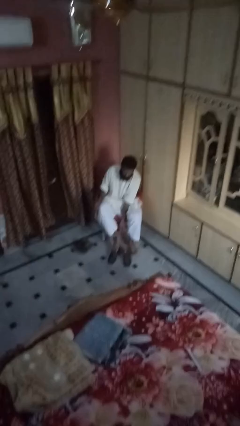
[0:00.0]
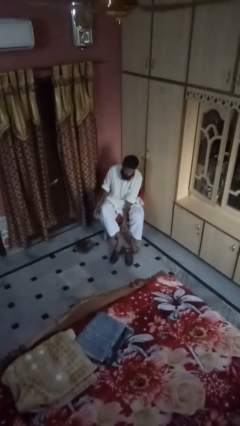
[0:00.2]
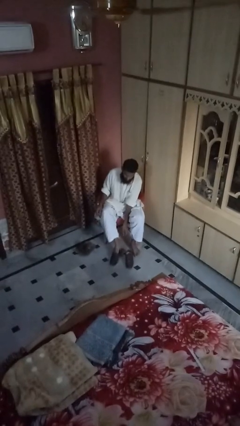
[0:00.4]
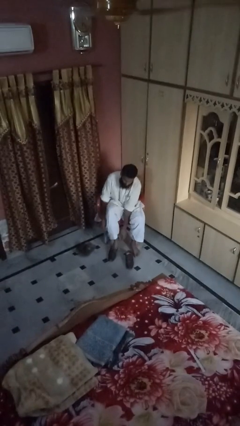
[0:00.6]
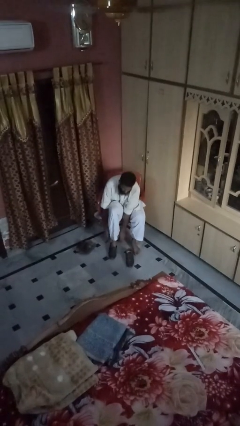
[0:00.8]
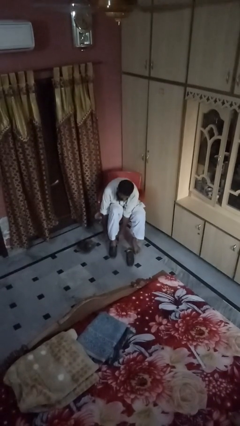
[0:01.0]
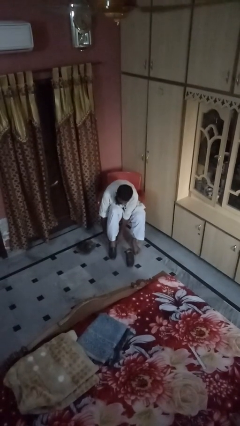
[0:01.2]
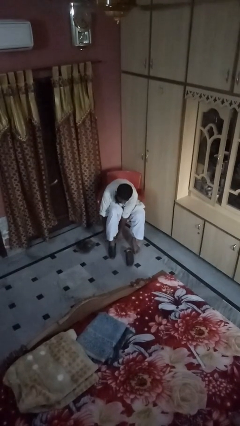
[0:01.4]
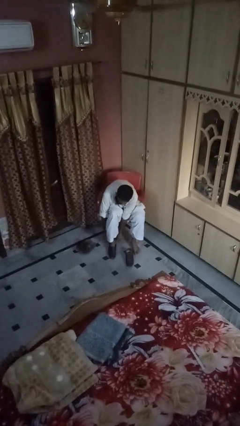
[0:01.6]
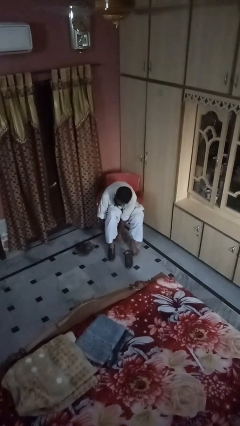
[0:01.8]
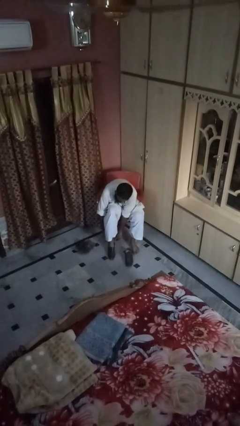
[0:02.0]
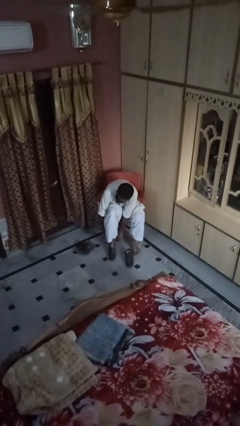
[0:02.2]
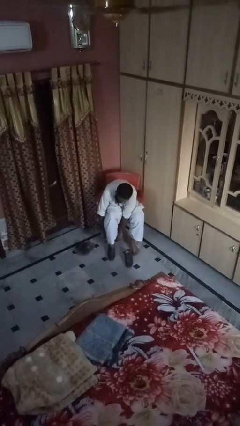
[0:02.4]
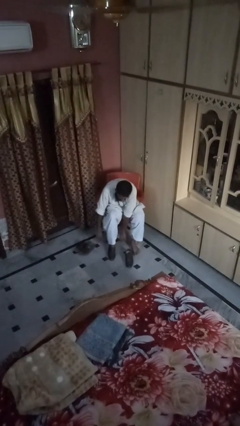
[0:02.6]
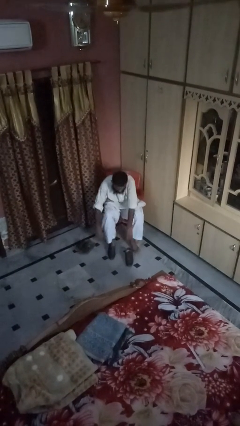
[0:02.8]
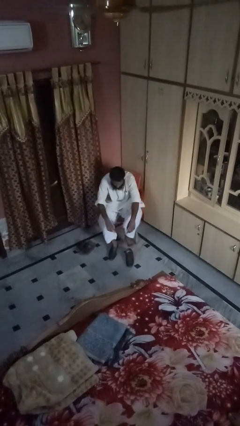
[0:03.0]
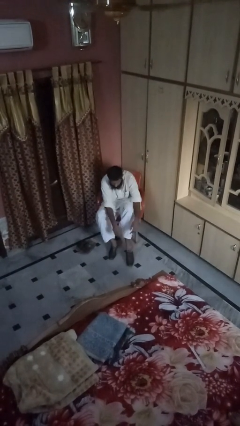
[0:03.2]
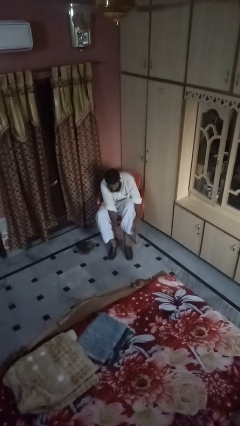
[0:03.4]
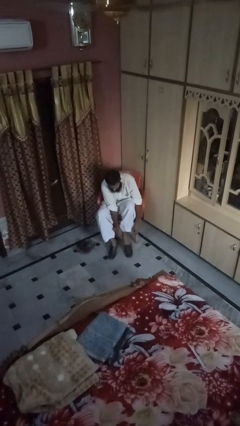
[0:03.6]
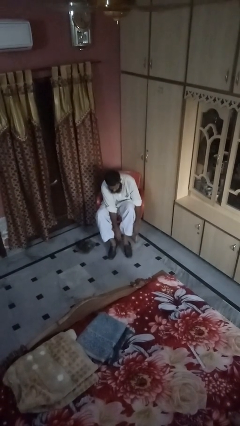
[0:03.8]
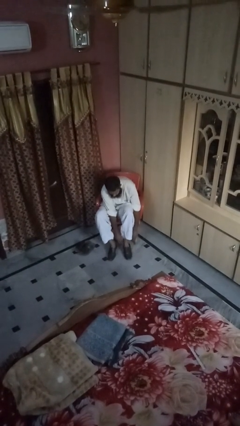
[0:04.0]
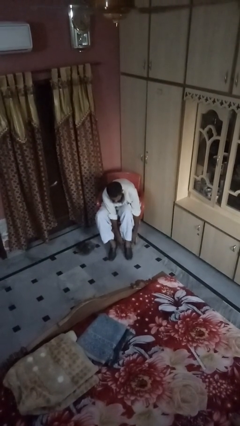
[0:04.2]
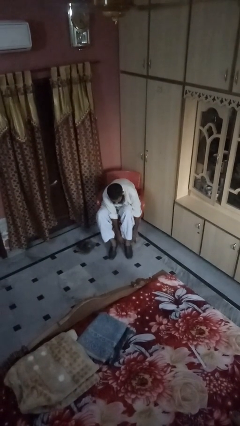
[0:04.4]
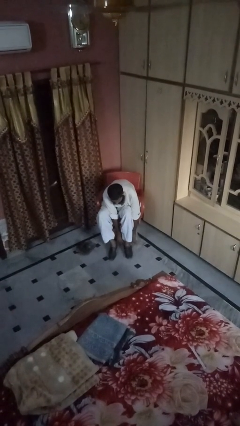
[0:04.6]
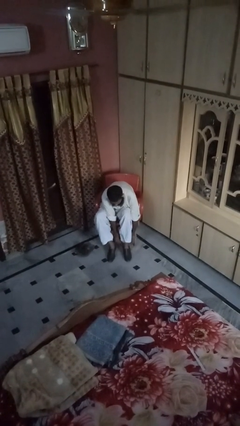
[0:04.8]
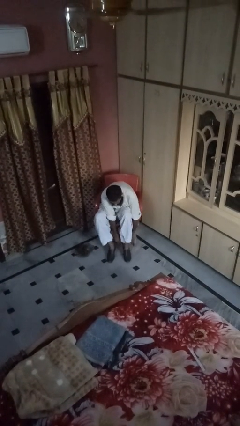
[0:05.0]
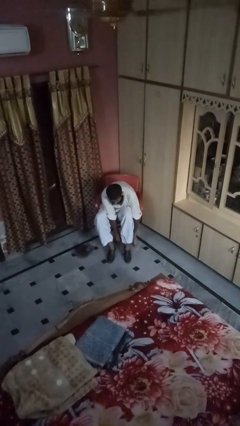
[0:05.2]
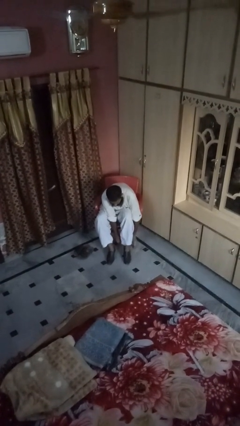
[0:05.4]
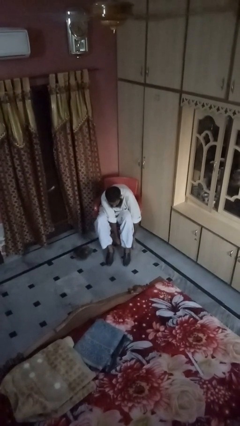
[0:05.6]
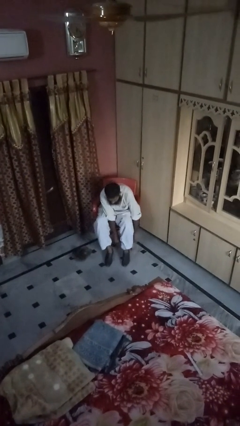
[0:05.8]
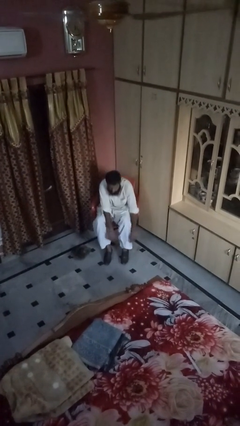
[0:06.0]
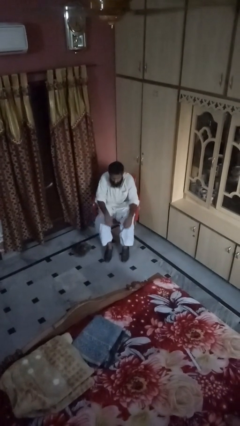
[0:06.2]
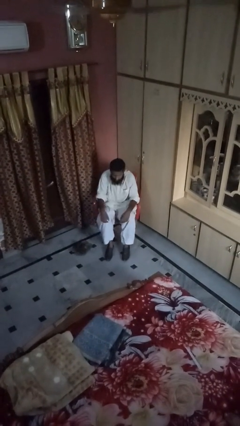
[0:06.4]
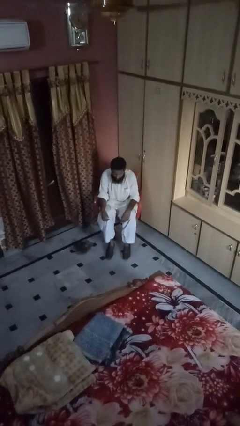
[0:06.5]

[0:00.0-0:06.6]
person puts on boots

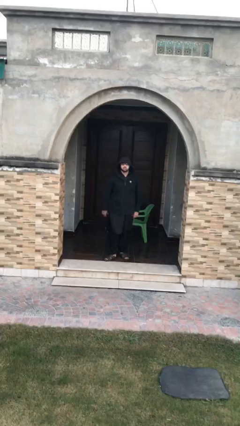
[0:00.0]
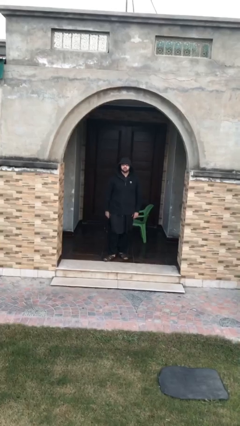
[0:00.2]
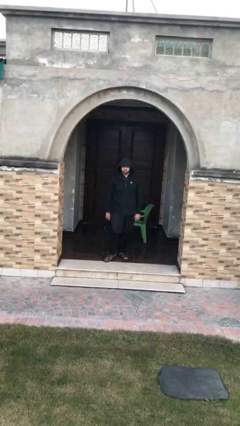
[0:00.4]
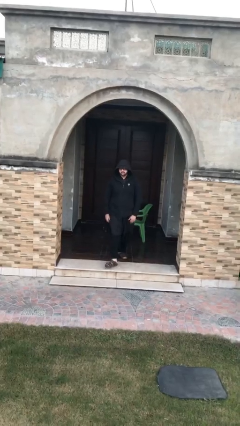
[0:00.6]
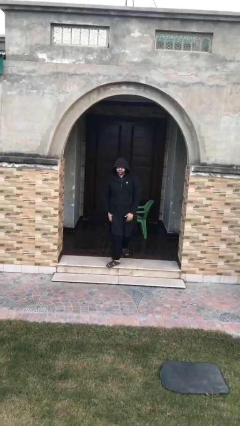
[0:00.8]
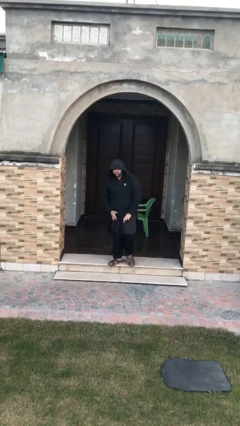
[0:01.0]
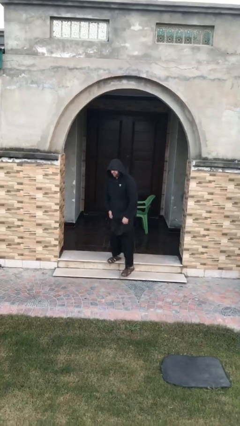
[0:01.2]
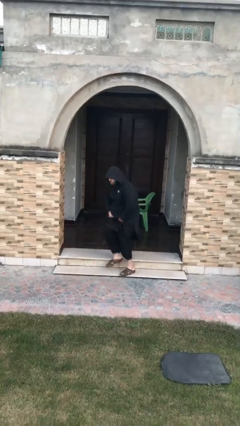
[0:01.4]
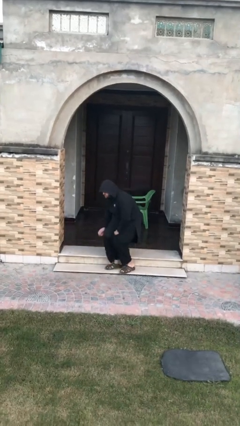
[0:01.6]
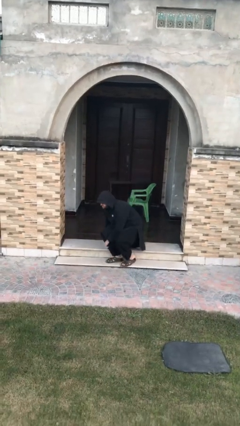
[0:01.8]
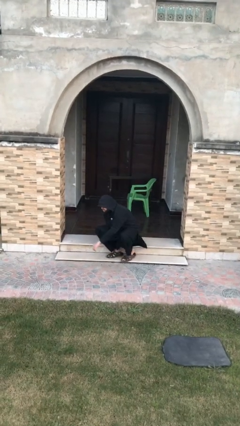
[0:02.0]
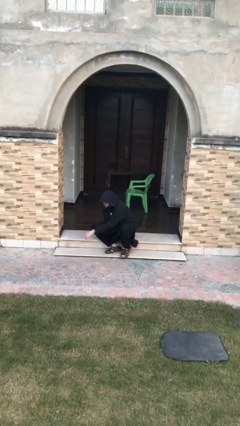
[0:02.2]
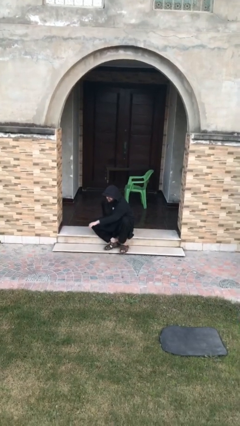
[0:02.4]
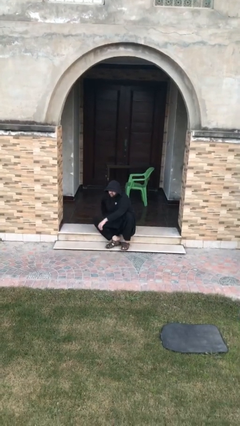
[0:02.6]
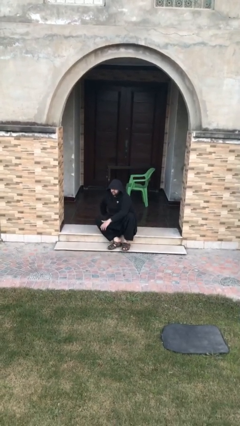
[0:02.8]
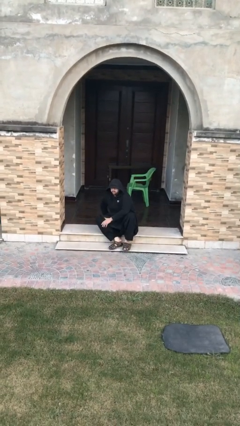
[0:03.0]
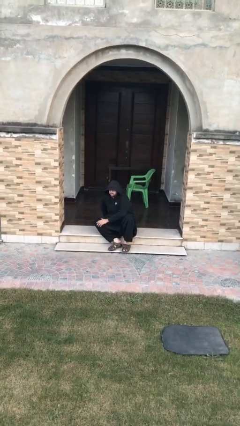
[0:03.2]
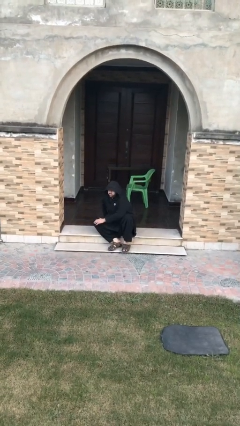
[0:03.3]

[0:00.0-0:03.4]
person sits down

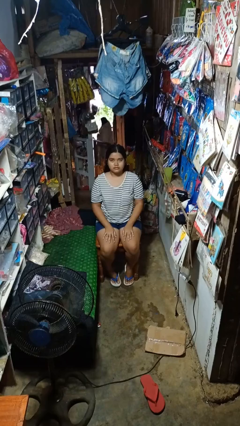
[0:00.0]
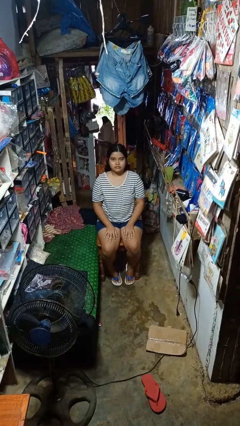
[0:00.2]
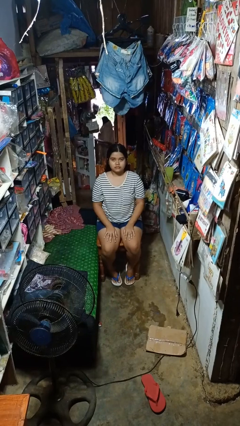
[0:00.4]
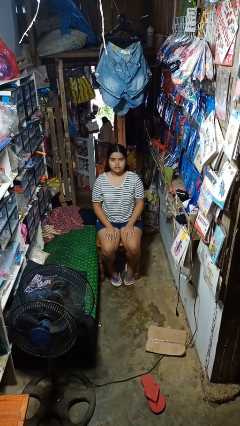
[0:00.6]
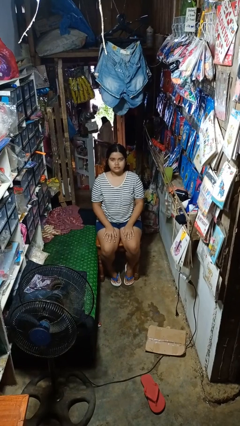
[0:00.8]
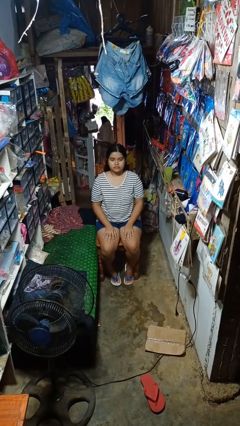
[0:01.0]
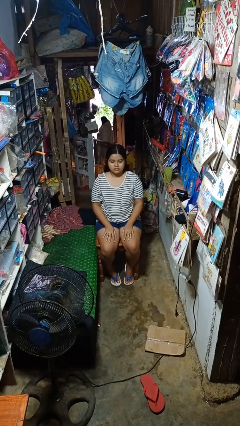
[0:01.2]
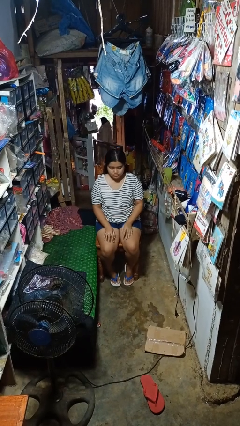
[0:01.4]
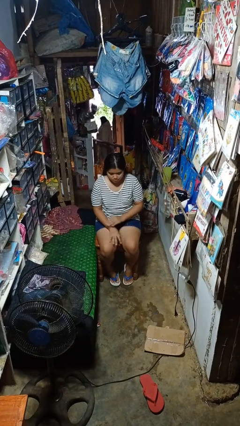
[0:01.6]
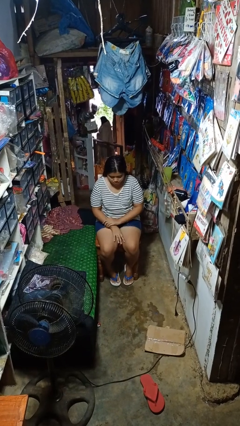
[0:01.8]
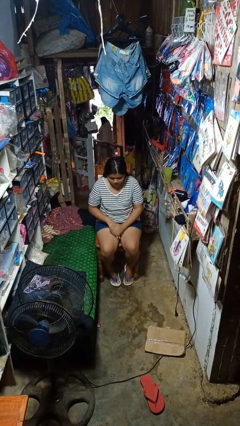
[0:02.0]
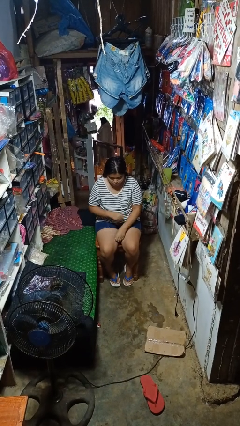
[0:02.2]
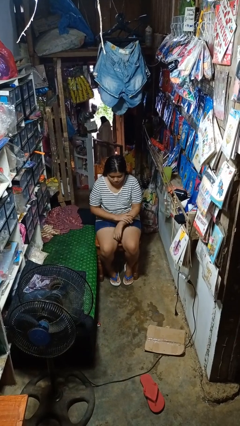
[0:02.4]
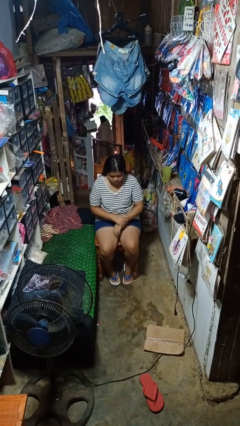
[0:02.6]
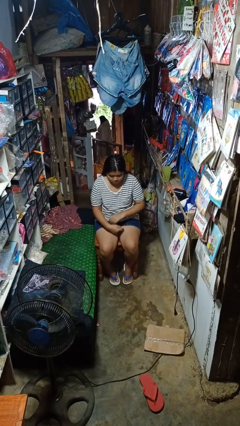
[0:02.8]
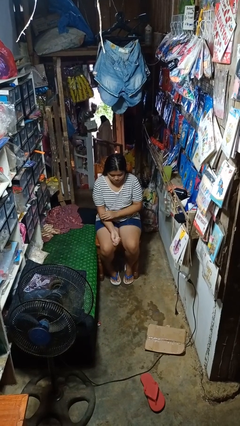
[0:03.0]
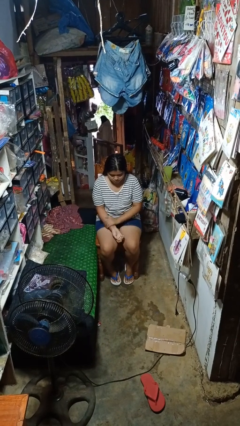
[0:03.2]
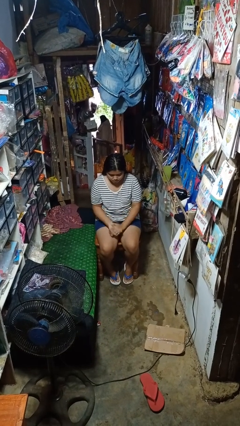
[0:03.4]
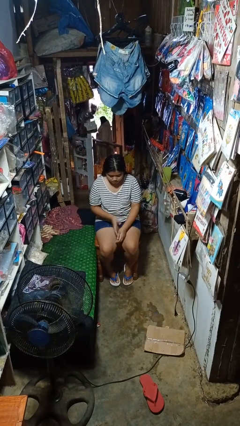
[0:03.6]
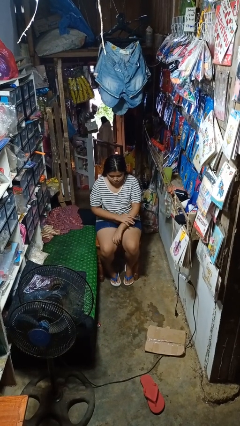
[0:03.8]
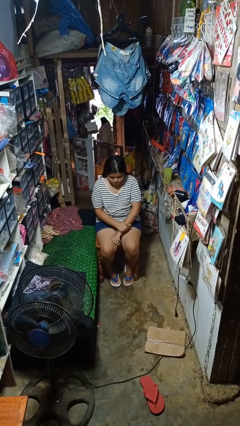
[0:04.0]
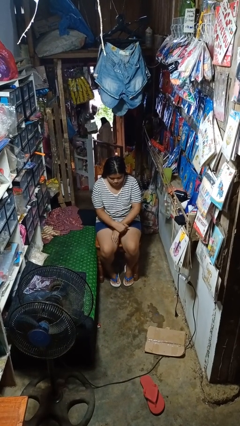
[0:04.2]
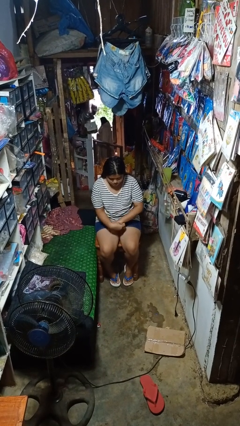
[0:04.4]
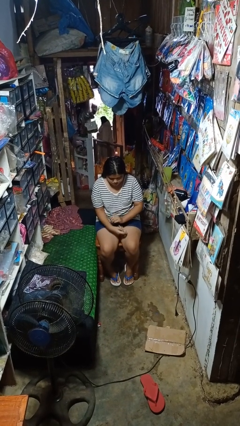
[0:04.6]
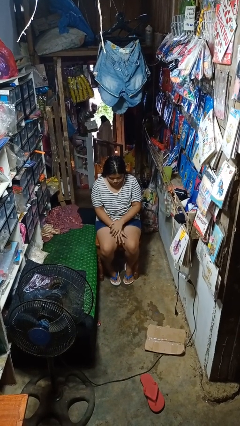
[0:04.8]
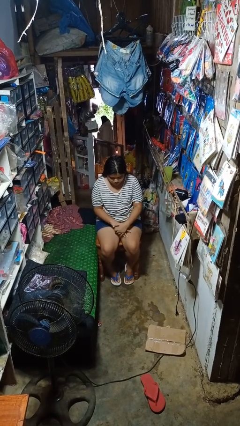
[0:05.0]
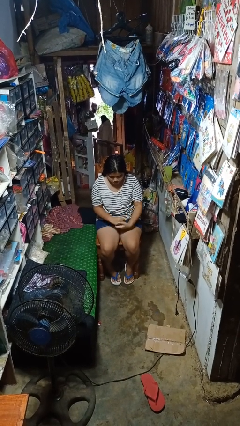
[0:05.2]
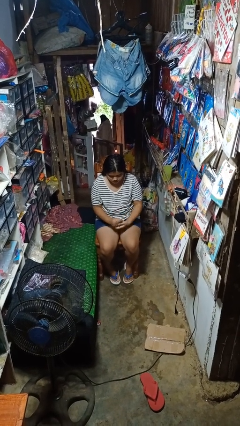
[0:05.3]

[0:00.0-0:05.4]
person looks at hands in lap

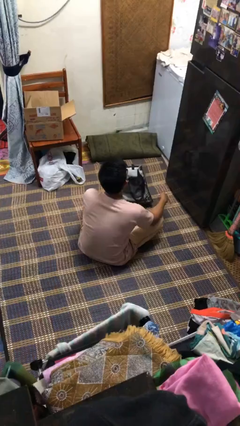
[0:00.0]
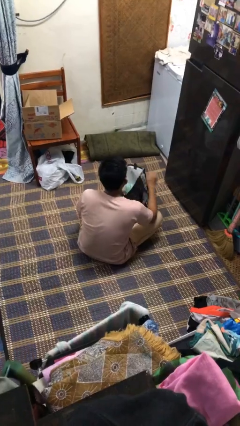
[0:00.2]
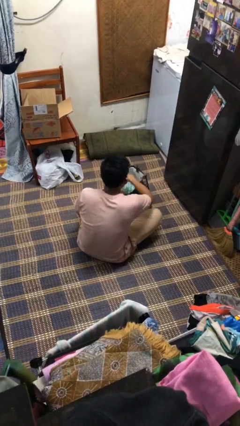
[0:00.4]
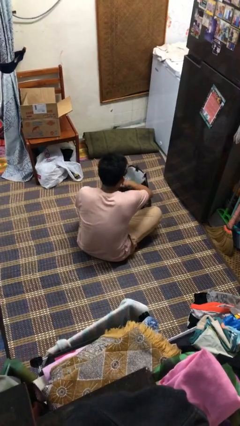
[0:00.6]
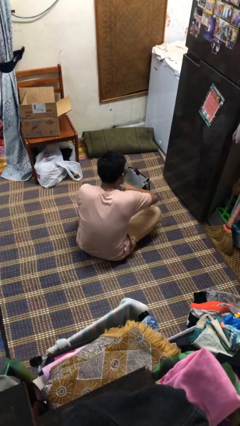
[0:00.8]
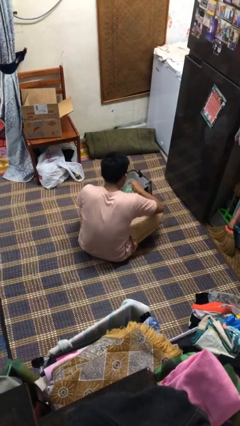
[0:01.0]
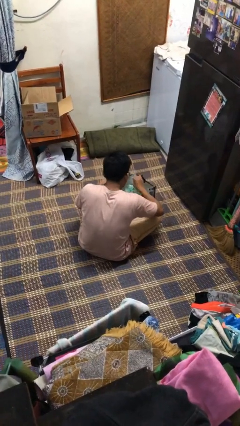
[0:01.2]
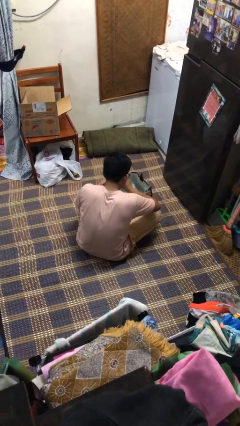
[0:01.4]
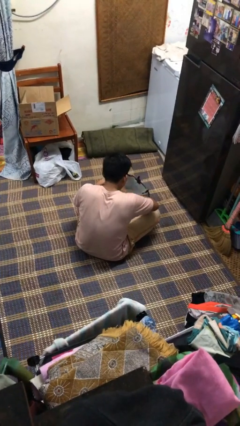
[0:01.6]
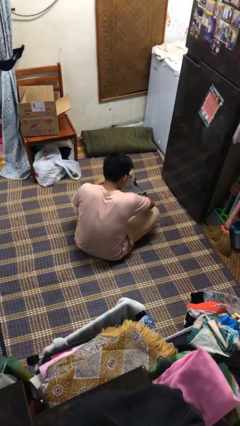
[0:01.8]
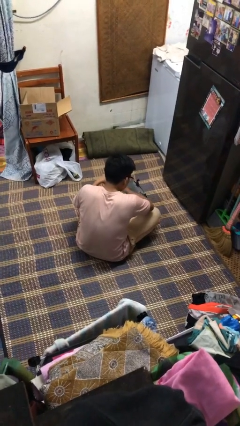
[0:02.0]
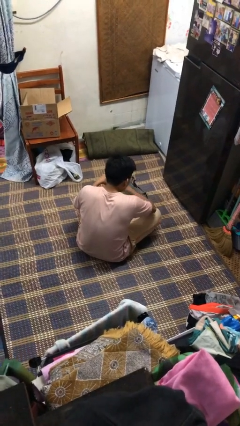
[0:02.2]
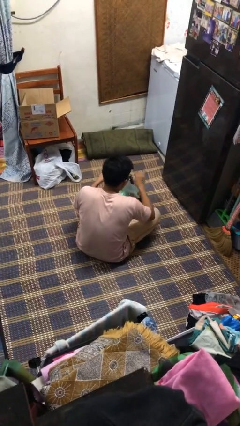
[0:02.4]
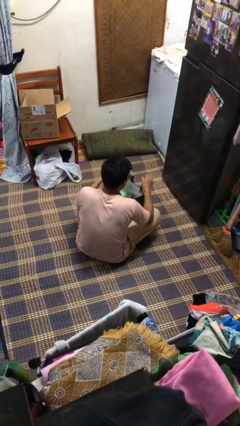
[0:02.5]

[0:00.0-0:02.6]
person searches in bag
